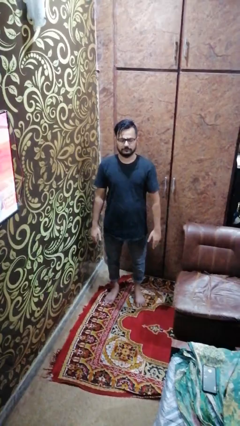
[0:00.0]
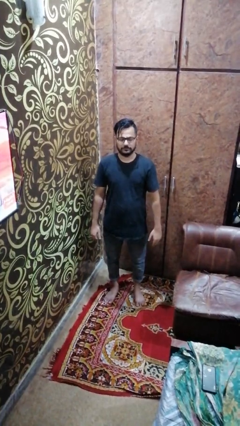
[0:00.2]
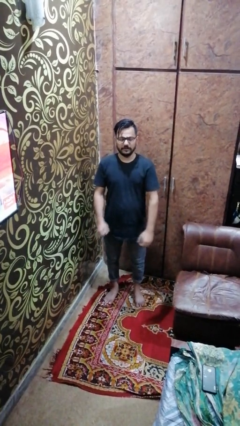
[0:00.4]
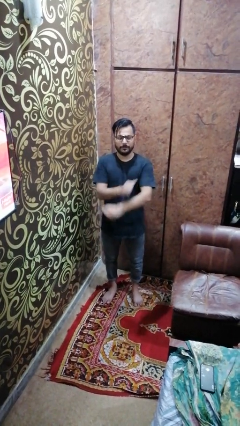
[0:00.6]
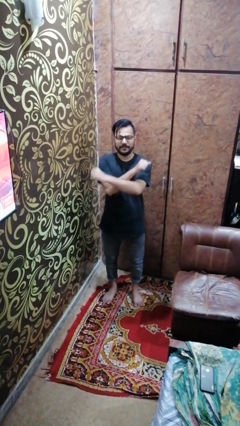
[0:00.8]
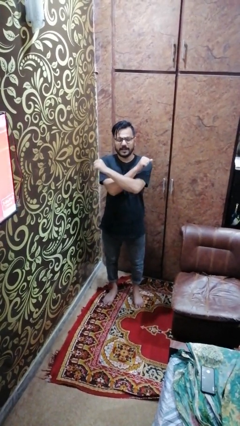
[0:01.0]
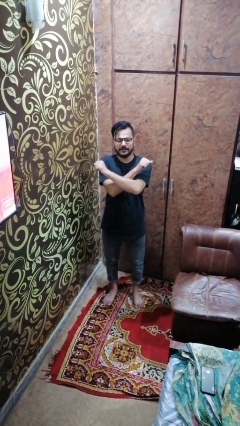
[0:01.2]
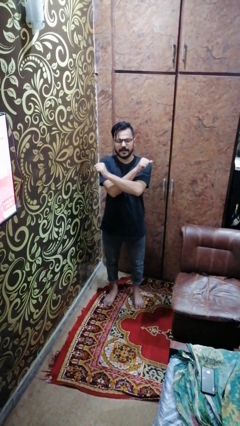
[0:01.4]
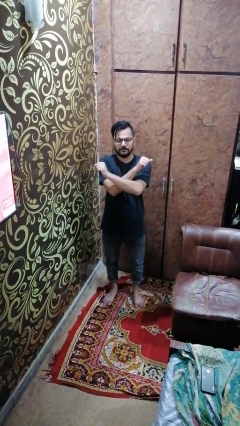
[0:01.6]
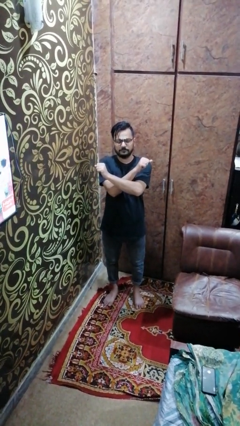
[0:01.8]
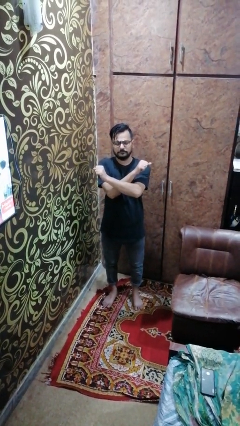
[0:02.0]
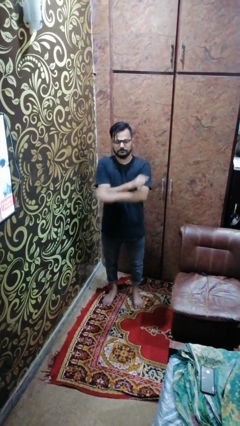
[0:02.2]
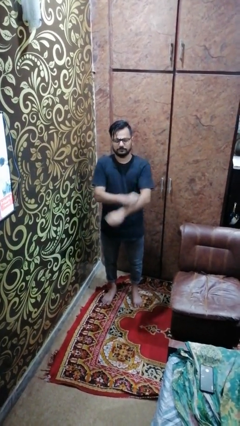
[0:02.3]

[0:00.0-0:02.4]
person crosses arms

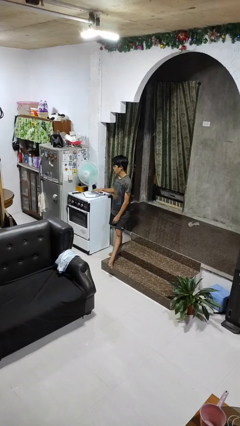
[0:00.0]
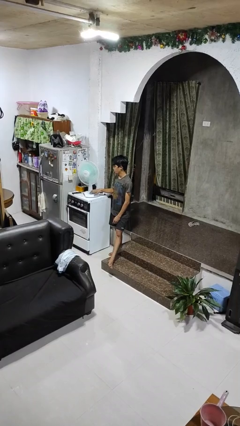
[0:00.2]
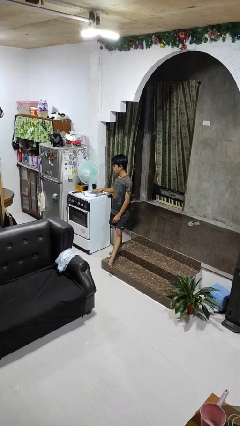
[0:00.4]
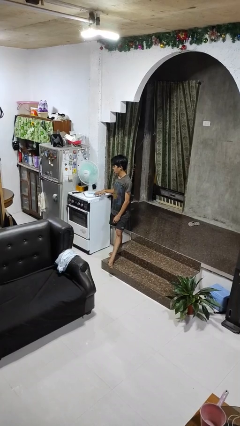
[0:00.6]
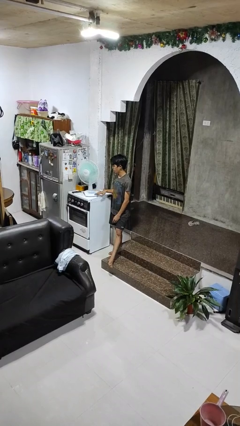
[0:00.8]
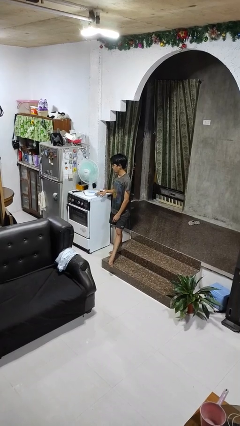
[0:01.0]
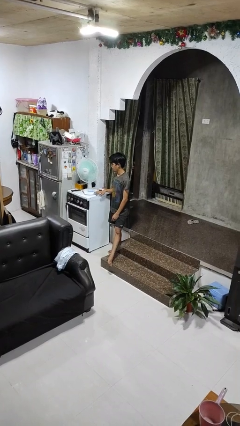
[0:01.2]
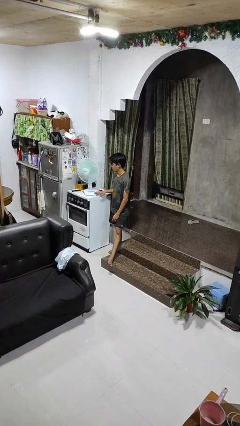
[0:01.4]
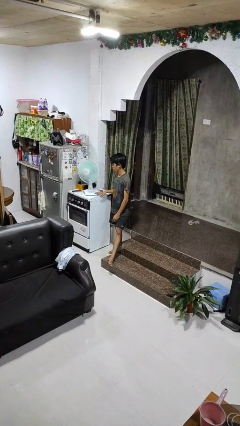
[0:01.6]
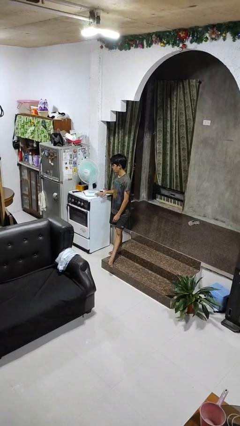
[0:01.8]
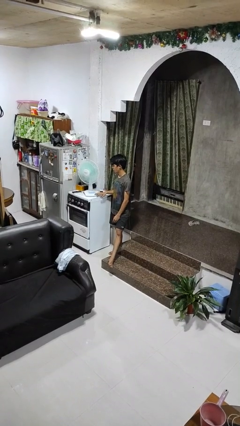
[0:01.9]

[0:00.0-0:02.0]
person turns off fan

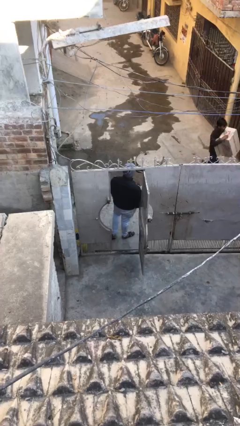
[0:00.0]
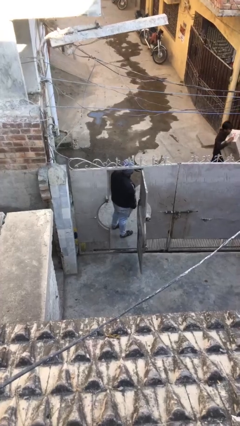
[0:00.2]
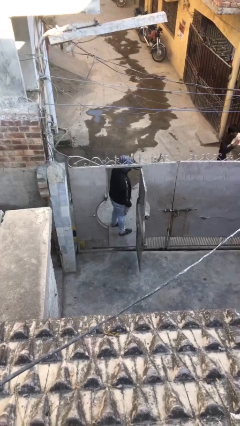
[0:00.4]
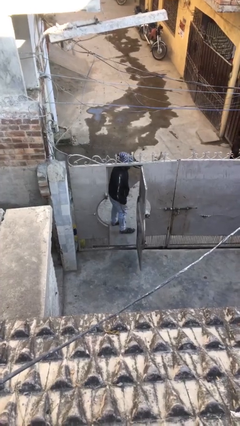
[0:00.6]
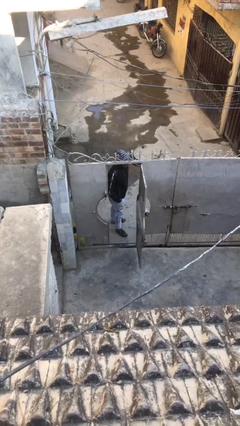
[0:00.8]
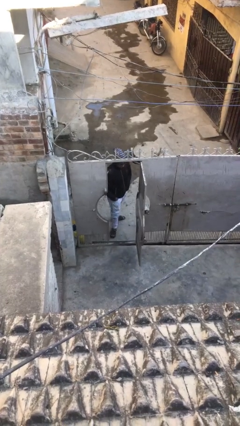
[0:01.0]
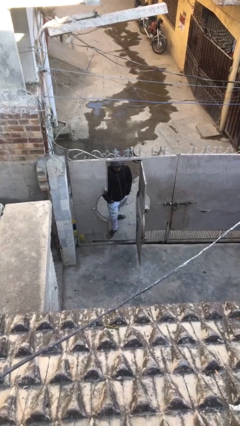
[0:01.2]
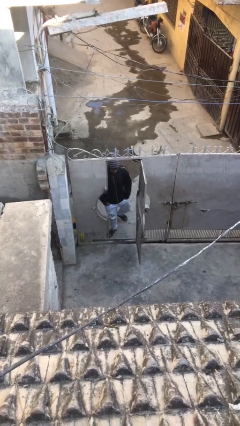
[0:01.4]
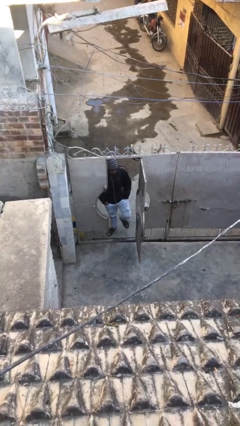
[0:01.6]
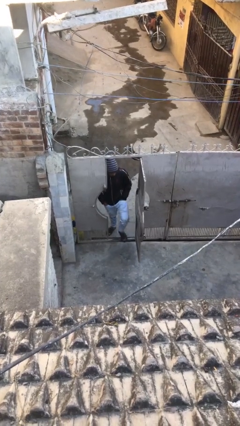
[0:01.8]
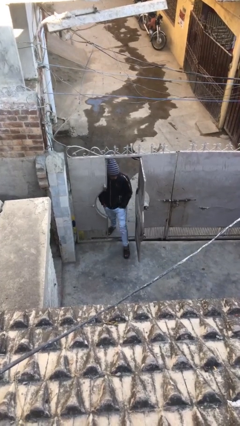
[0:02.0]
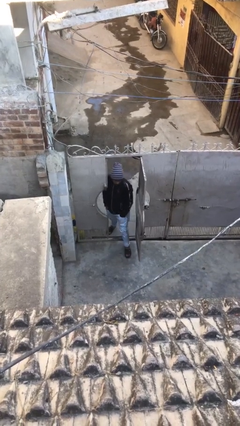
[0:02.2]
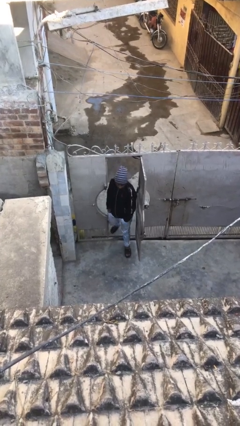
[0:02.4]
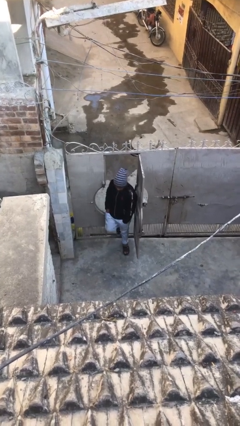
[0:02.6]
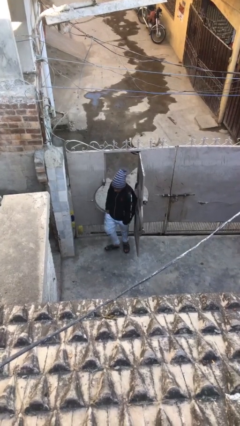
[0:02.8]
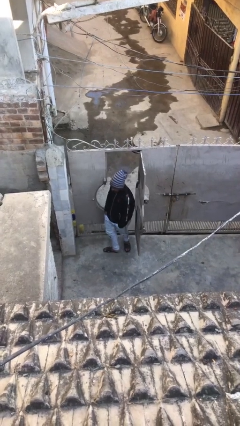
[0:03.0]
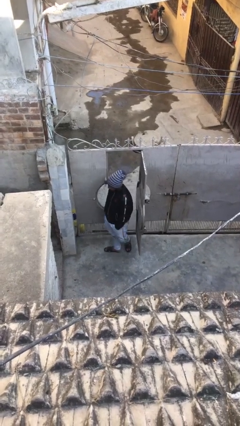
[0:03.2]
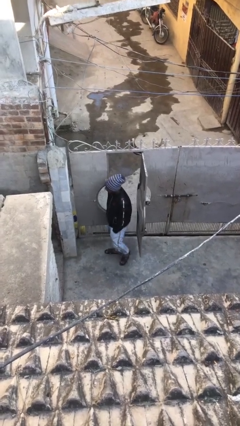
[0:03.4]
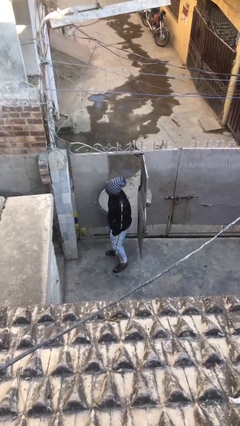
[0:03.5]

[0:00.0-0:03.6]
person enters scene through structure

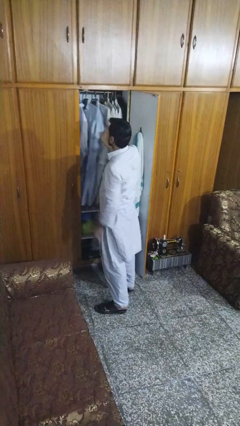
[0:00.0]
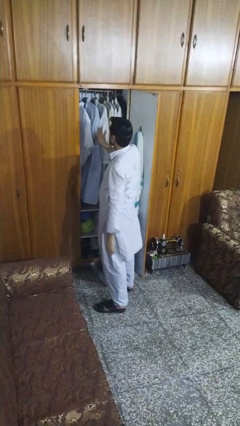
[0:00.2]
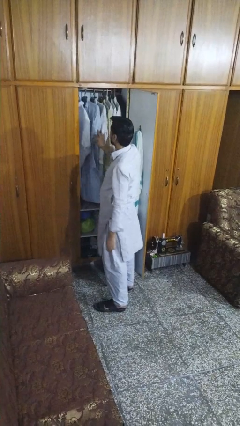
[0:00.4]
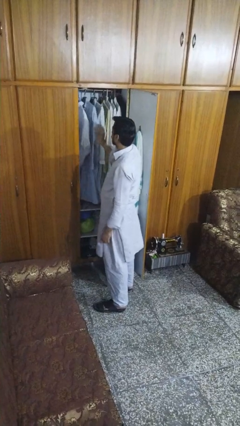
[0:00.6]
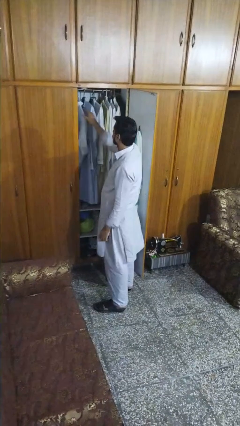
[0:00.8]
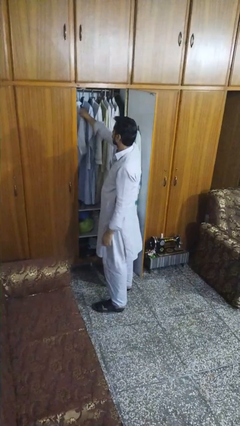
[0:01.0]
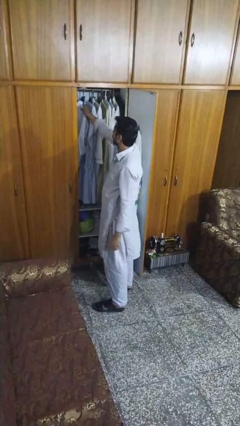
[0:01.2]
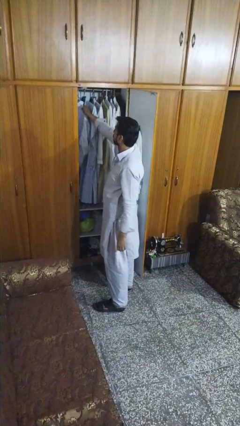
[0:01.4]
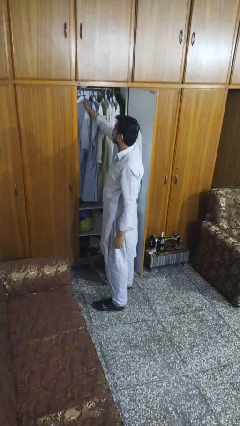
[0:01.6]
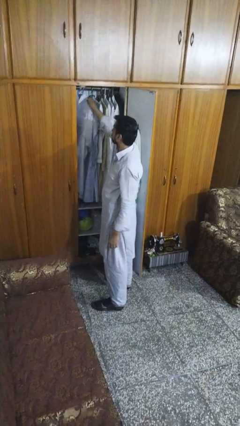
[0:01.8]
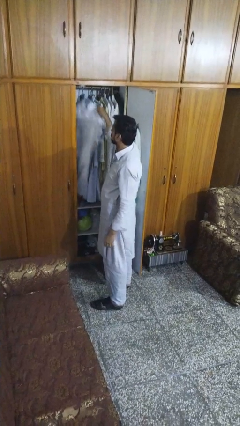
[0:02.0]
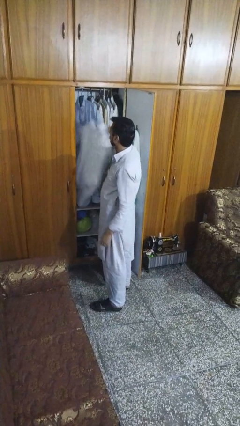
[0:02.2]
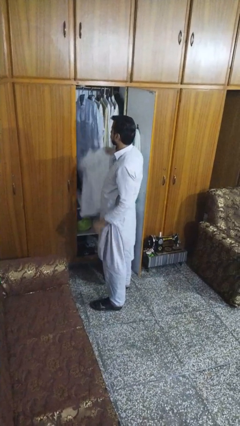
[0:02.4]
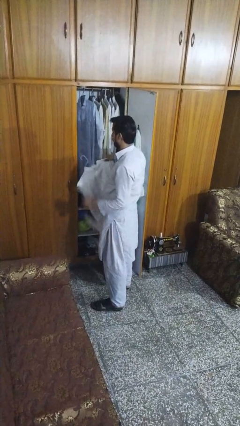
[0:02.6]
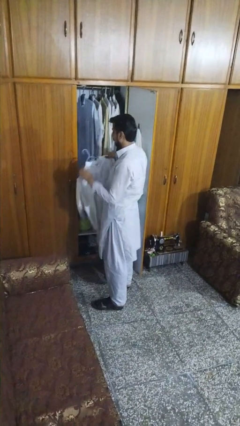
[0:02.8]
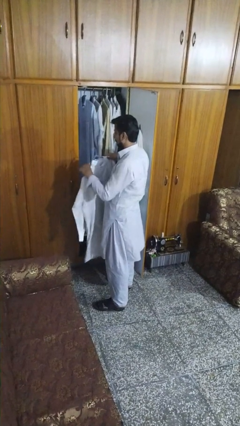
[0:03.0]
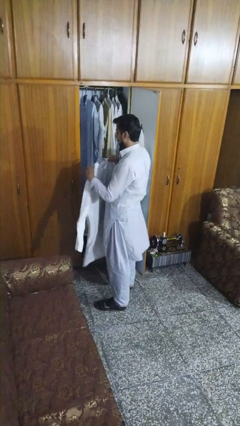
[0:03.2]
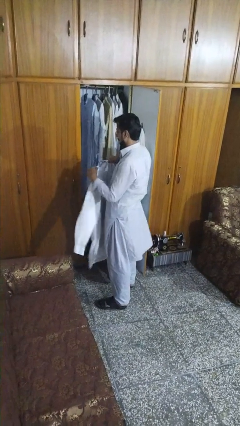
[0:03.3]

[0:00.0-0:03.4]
person takes clothes from dresser

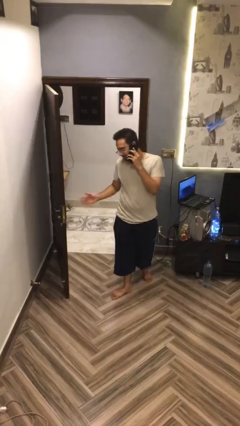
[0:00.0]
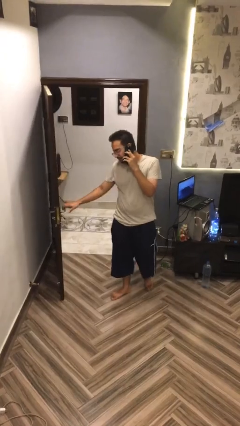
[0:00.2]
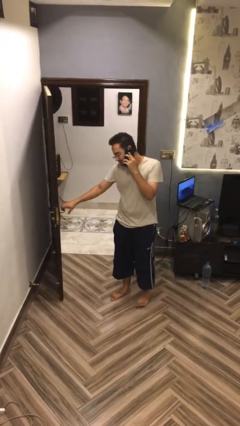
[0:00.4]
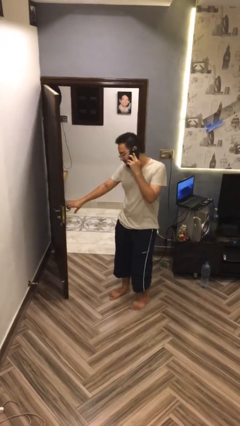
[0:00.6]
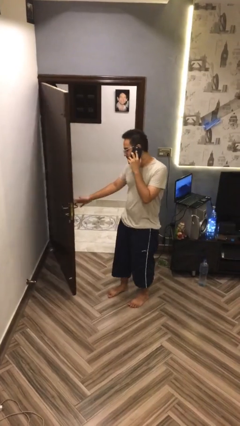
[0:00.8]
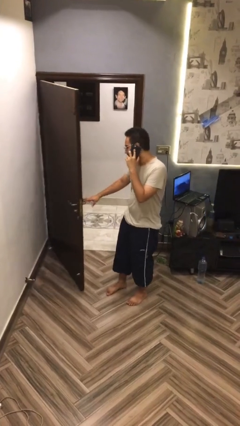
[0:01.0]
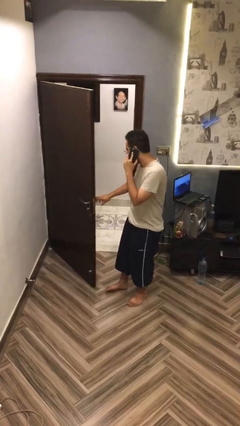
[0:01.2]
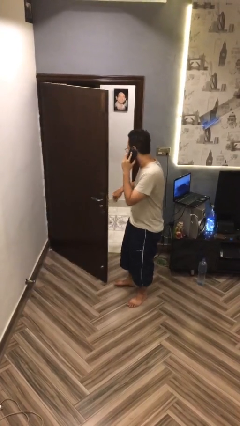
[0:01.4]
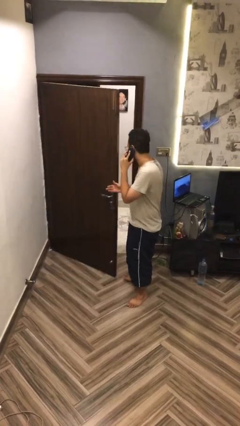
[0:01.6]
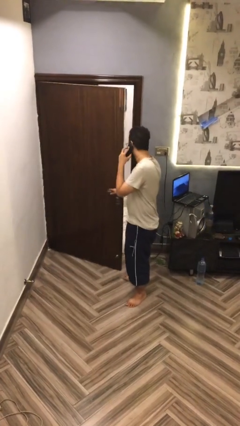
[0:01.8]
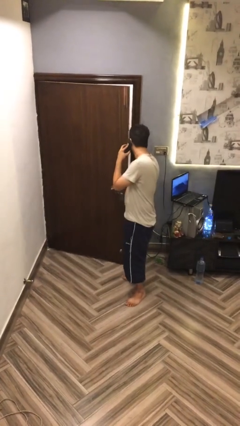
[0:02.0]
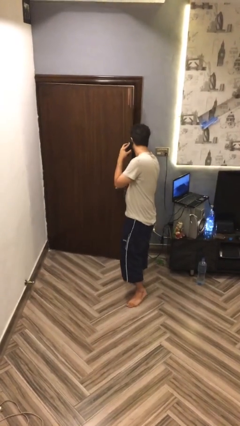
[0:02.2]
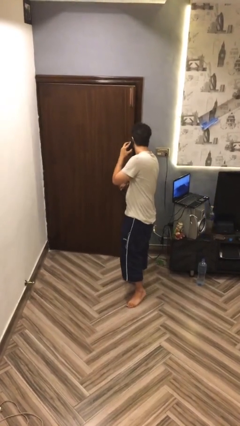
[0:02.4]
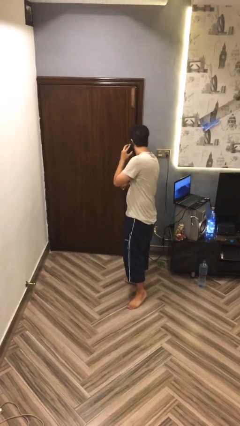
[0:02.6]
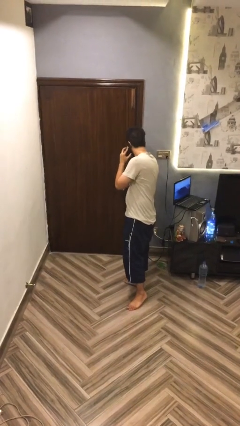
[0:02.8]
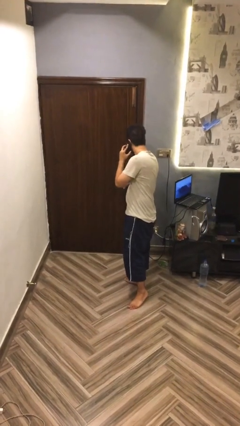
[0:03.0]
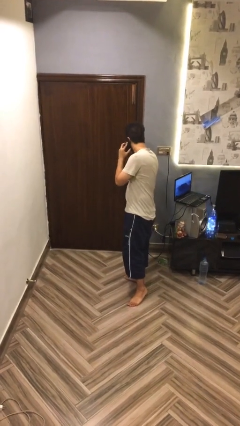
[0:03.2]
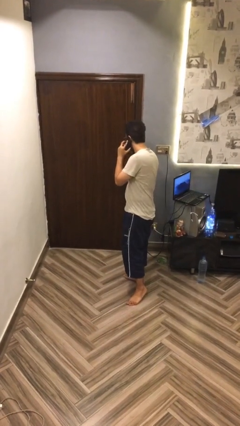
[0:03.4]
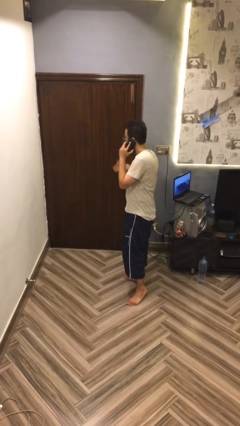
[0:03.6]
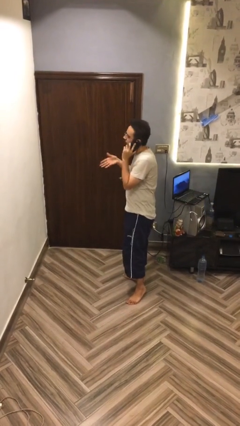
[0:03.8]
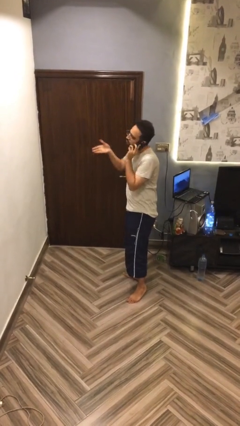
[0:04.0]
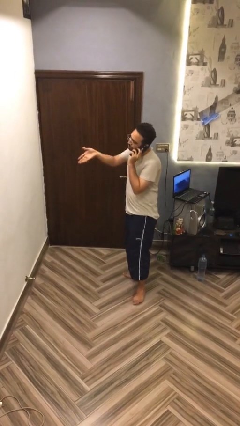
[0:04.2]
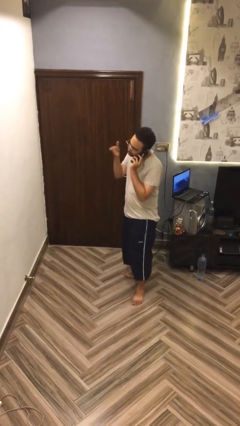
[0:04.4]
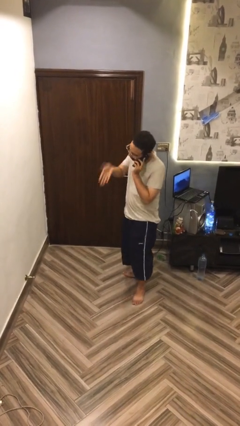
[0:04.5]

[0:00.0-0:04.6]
person closes facility door

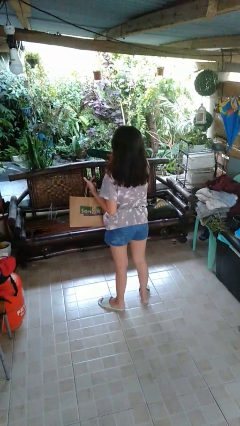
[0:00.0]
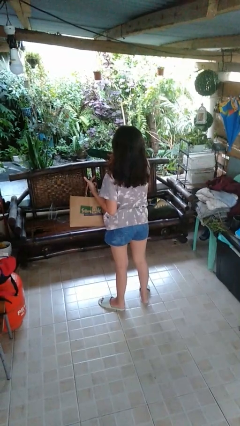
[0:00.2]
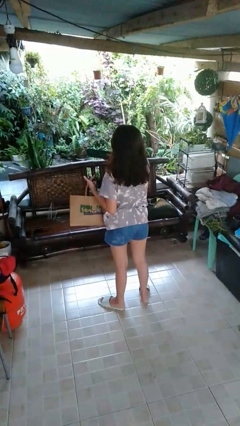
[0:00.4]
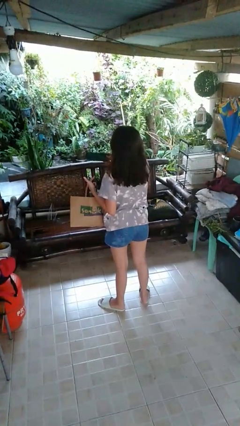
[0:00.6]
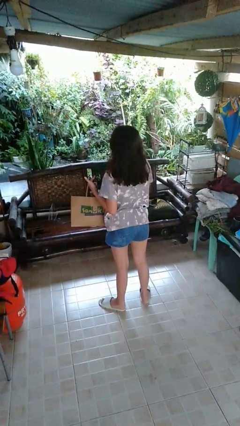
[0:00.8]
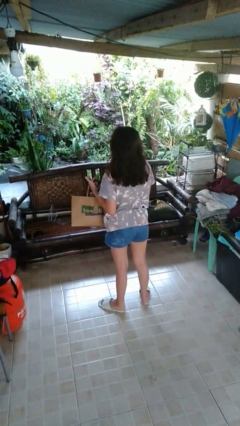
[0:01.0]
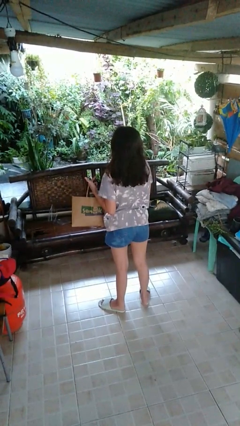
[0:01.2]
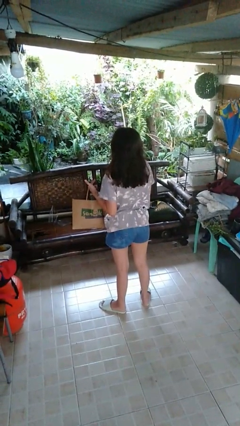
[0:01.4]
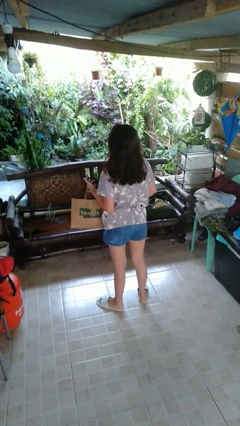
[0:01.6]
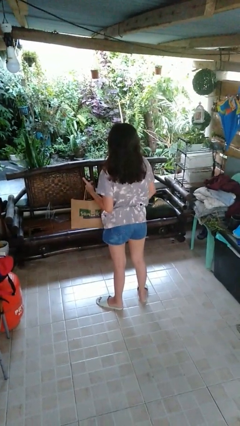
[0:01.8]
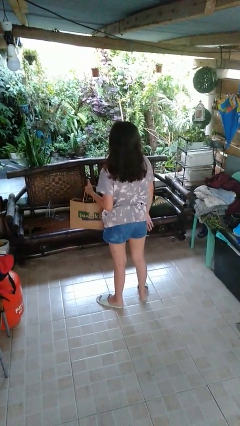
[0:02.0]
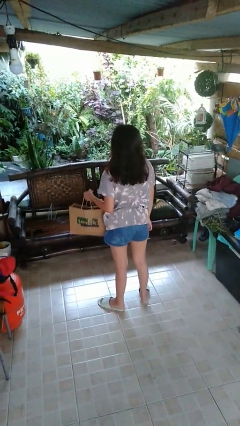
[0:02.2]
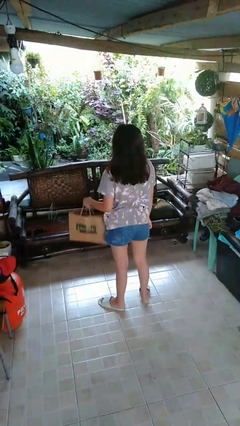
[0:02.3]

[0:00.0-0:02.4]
person puts object into bag
